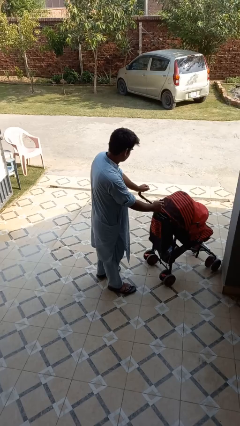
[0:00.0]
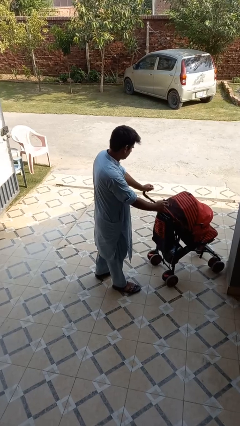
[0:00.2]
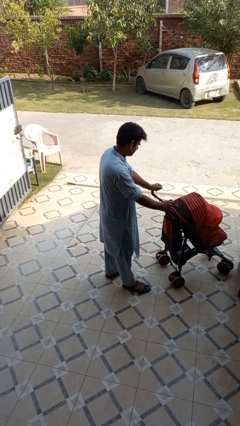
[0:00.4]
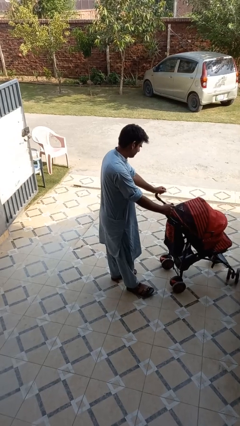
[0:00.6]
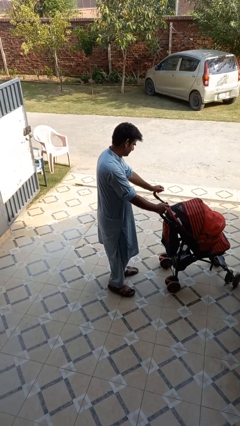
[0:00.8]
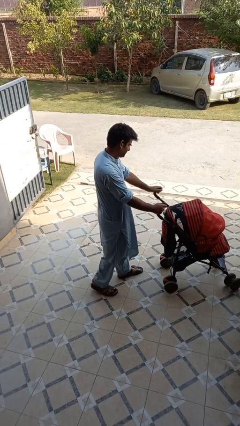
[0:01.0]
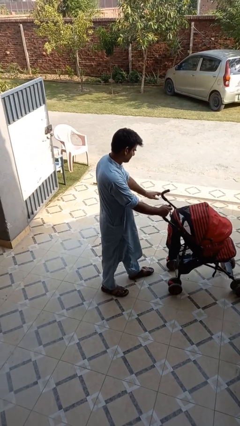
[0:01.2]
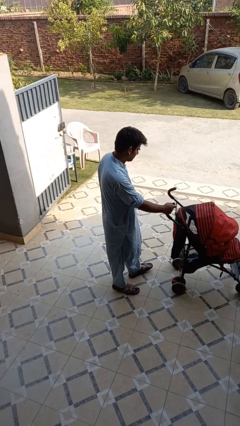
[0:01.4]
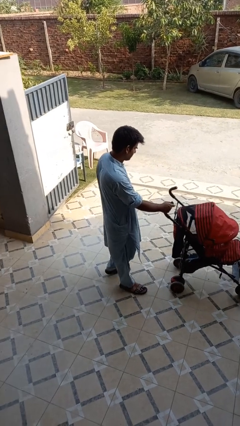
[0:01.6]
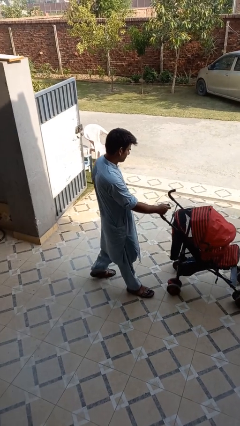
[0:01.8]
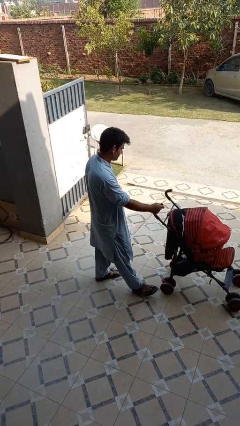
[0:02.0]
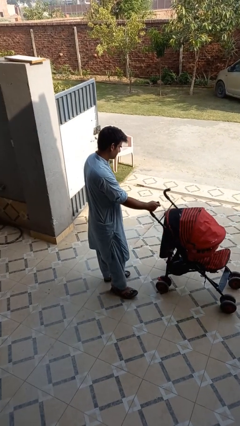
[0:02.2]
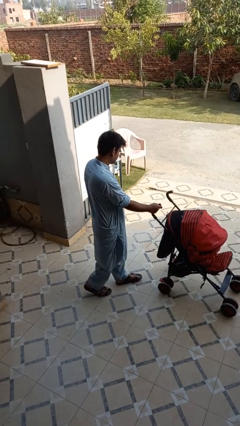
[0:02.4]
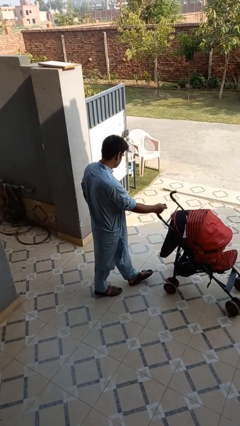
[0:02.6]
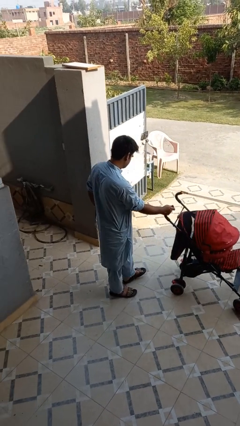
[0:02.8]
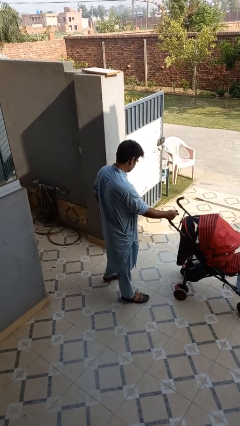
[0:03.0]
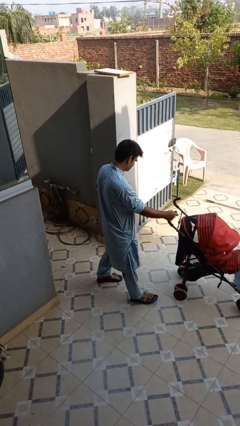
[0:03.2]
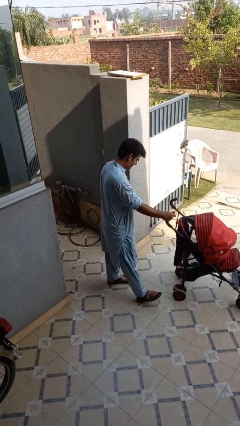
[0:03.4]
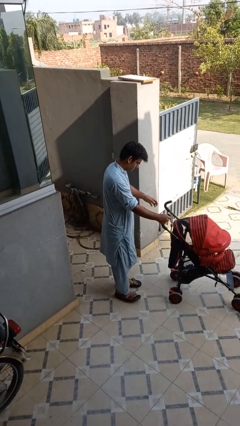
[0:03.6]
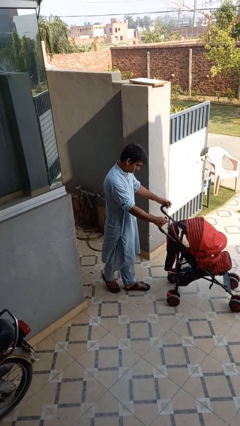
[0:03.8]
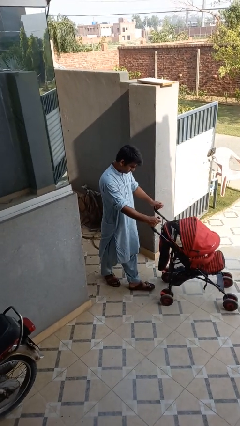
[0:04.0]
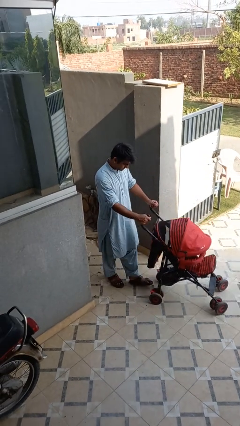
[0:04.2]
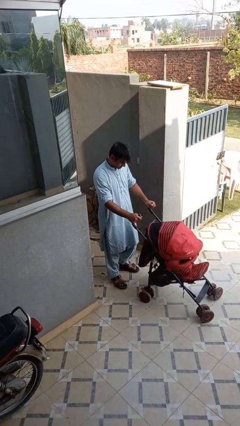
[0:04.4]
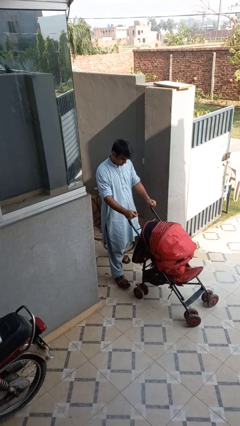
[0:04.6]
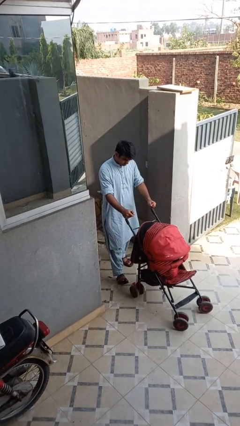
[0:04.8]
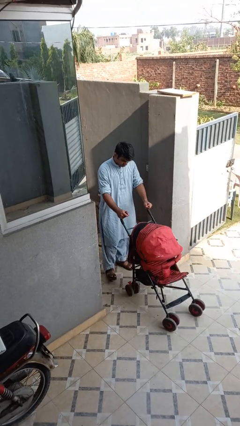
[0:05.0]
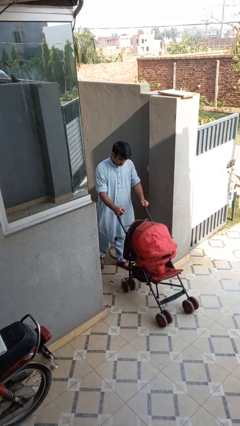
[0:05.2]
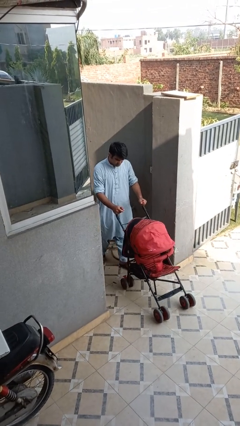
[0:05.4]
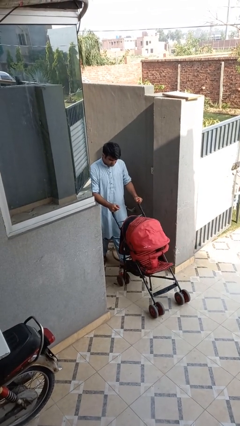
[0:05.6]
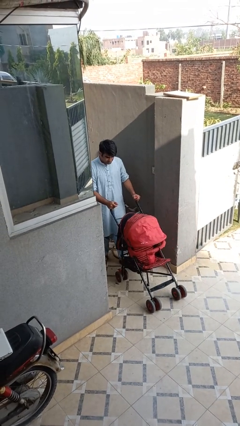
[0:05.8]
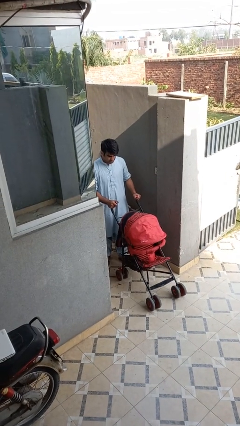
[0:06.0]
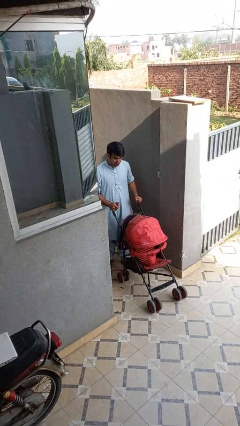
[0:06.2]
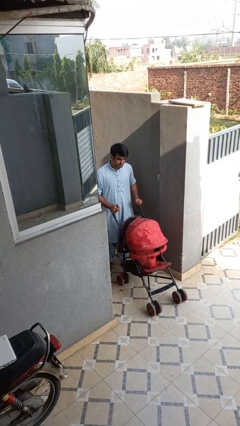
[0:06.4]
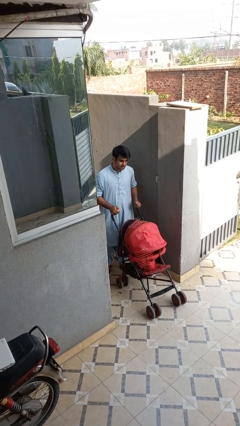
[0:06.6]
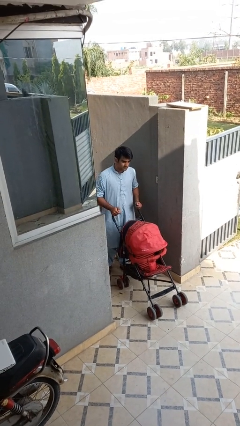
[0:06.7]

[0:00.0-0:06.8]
person pulls wheeled cart

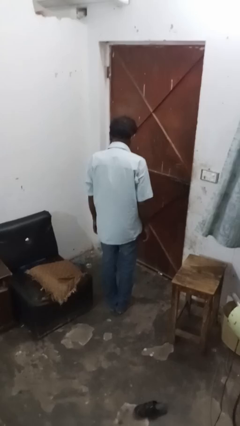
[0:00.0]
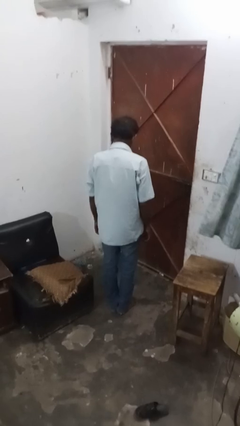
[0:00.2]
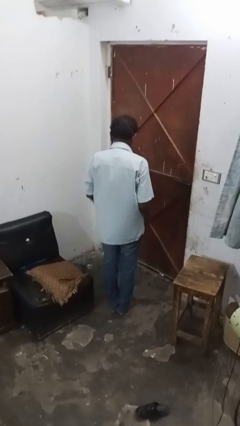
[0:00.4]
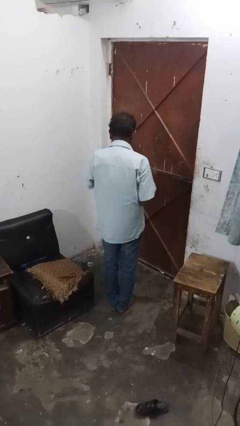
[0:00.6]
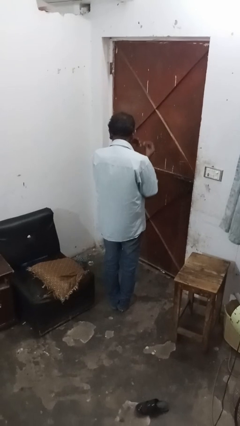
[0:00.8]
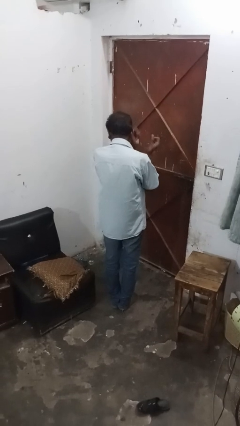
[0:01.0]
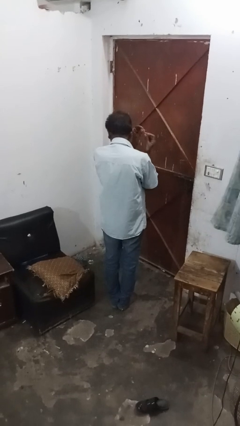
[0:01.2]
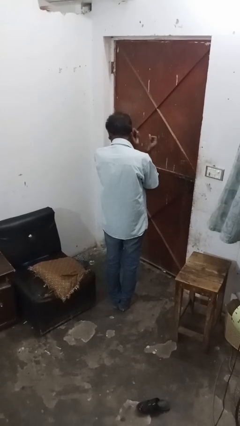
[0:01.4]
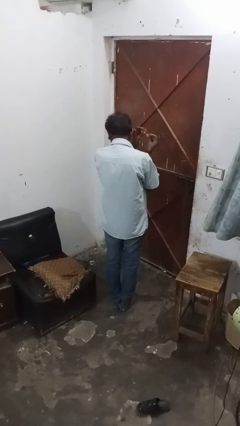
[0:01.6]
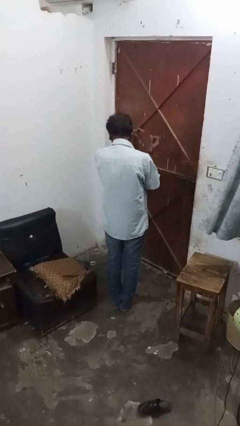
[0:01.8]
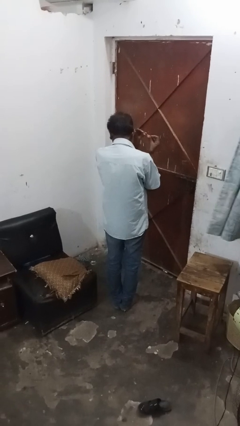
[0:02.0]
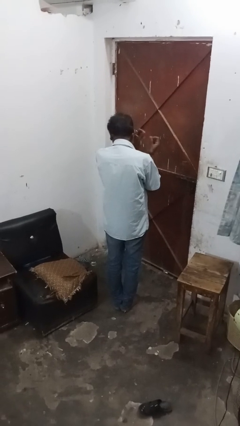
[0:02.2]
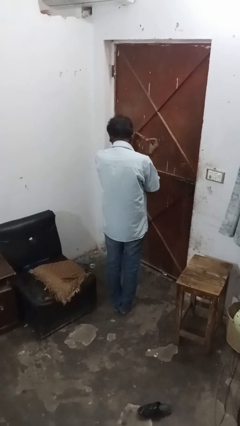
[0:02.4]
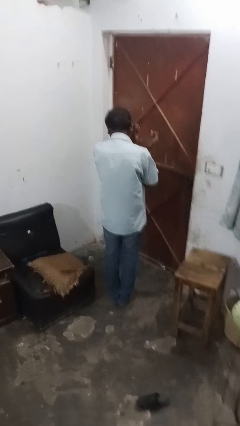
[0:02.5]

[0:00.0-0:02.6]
person snaps fingers

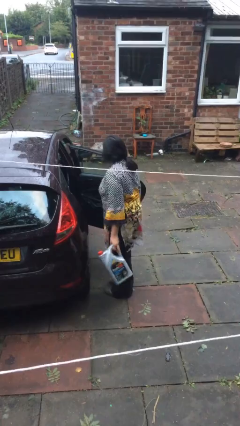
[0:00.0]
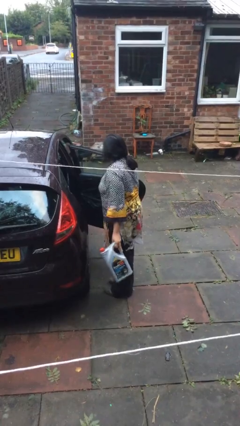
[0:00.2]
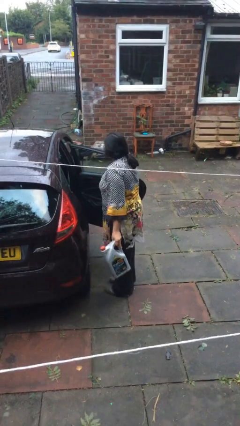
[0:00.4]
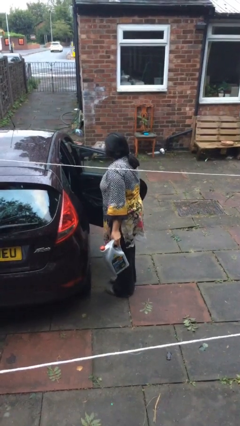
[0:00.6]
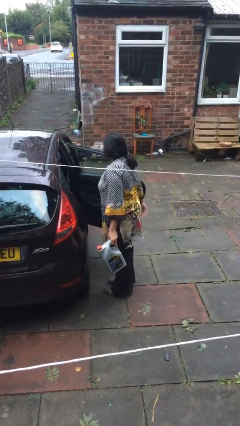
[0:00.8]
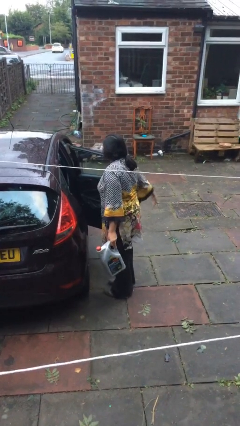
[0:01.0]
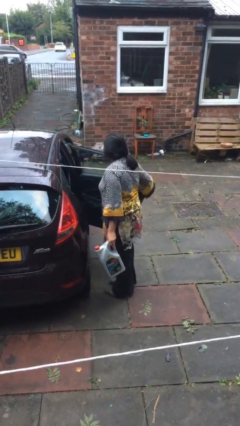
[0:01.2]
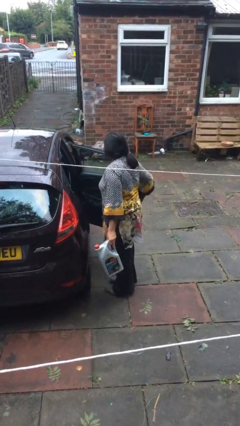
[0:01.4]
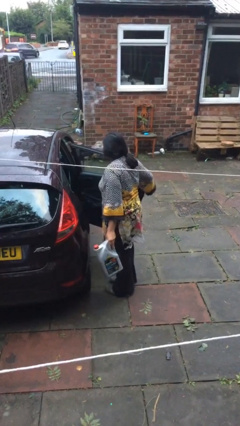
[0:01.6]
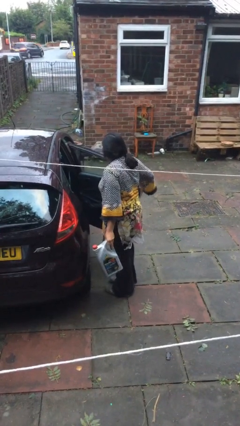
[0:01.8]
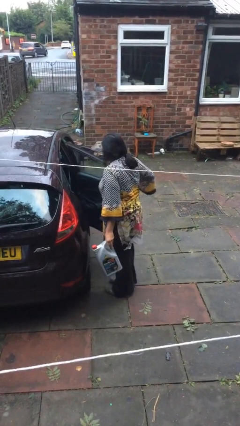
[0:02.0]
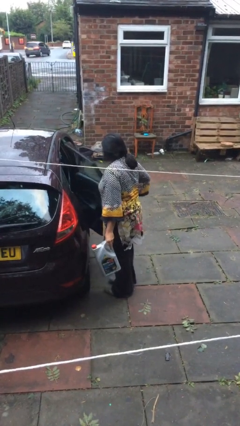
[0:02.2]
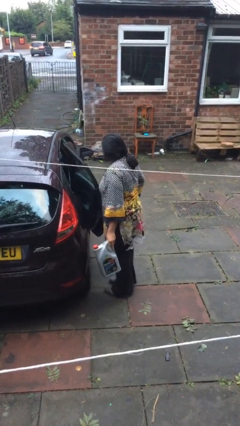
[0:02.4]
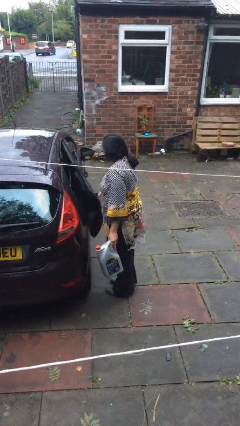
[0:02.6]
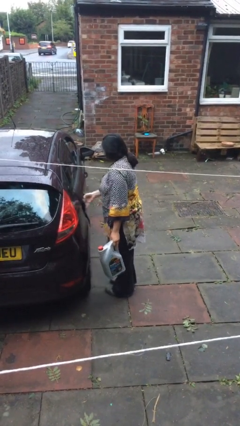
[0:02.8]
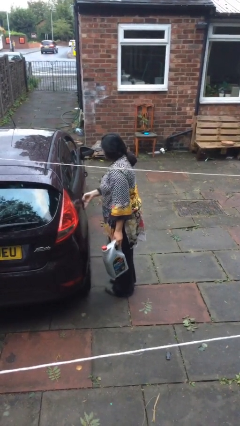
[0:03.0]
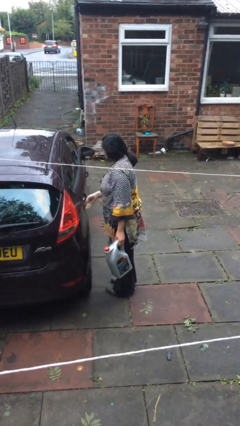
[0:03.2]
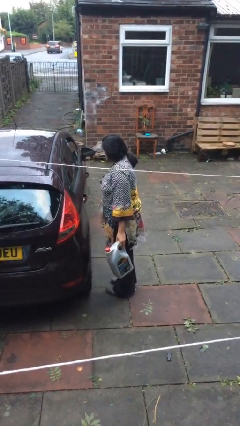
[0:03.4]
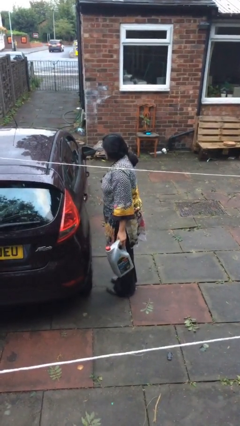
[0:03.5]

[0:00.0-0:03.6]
person closes car door

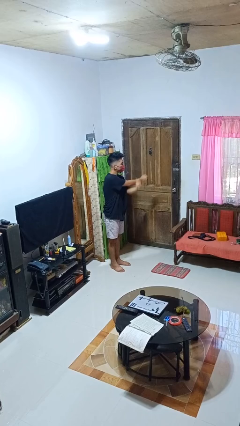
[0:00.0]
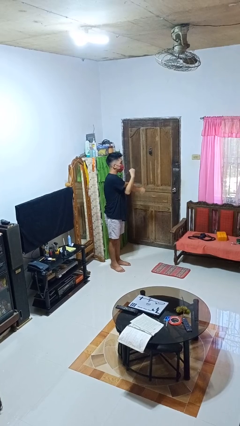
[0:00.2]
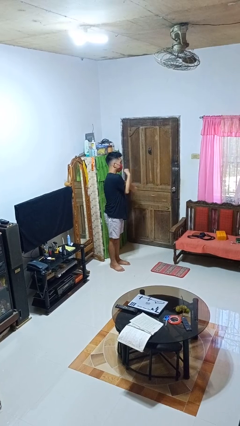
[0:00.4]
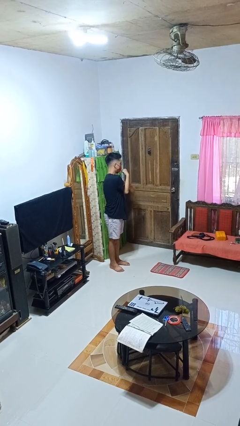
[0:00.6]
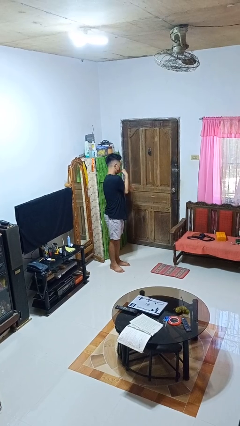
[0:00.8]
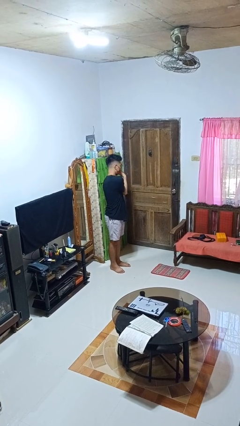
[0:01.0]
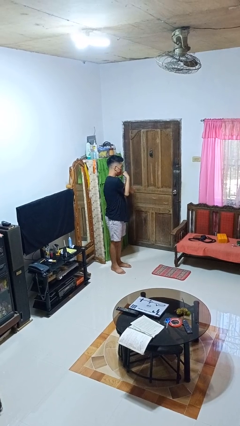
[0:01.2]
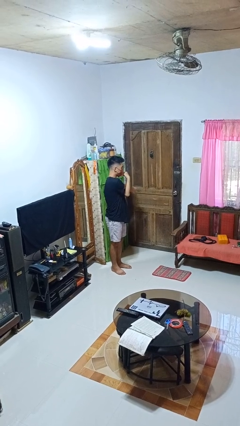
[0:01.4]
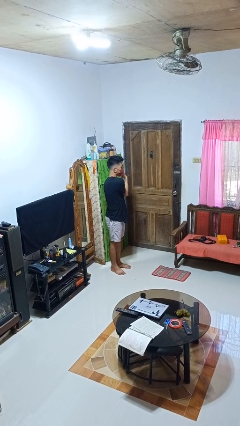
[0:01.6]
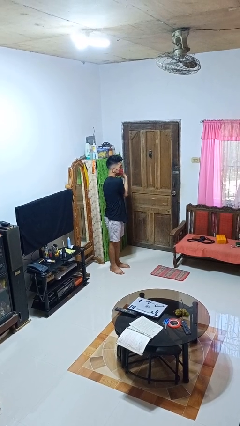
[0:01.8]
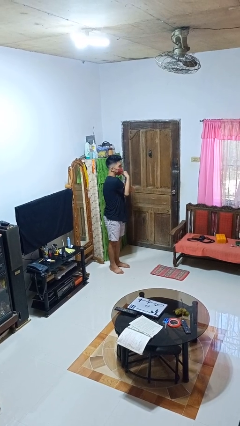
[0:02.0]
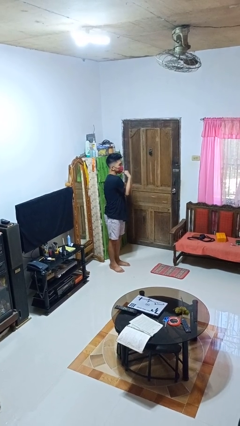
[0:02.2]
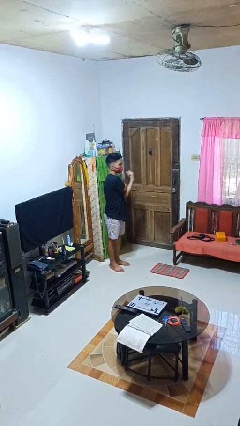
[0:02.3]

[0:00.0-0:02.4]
person stretches arms to side

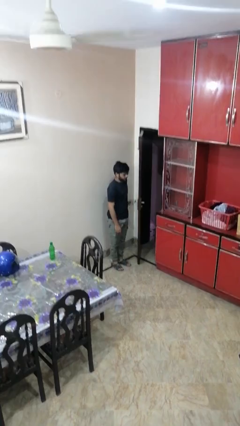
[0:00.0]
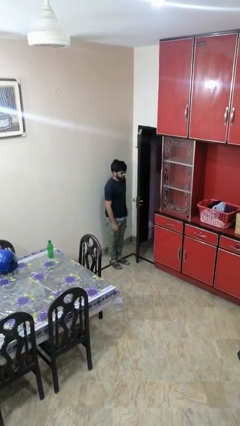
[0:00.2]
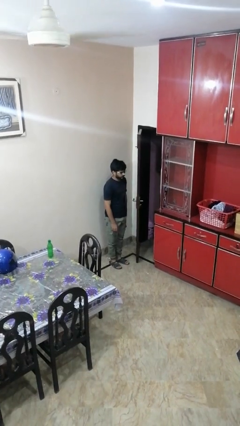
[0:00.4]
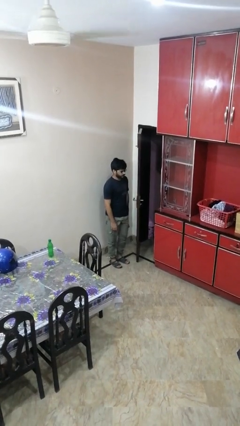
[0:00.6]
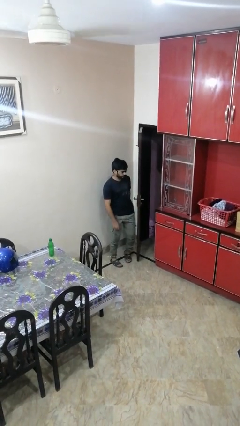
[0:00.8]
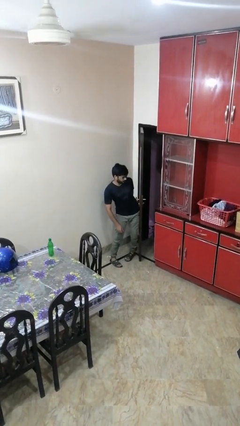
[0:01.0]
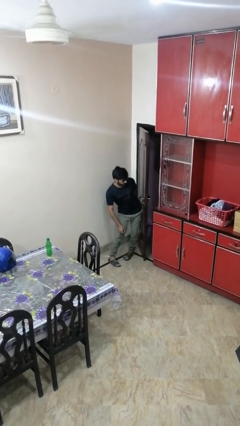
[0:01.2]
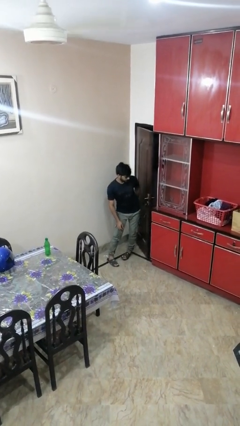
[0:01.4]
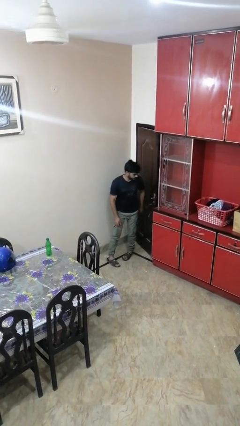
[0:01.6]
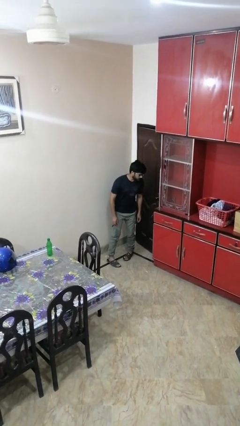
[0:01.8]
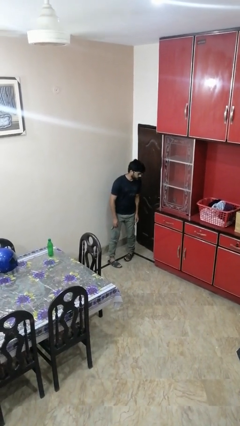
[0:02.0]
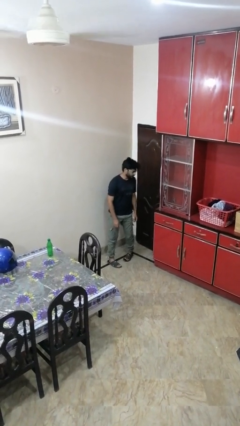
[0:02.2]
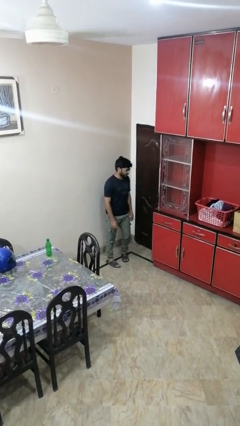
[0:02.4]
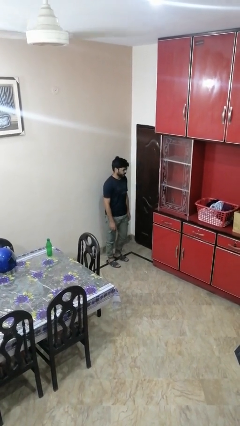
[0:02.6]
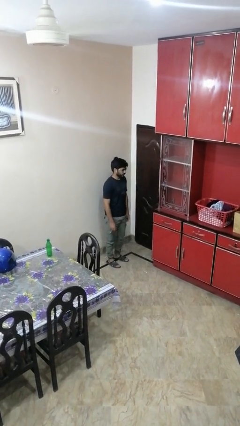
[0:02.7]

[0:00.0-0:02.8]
person closes door with hip
